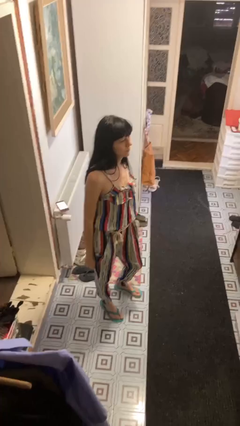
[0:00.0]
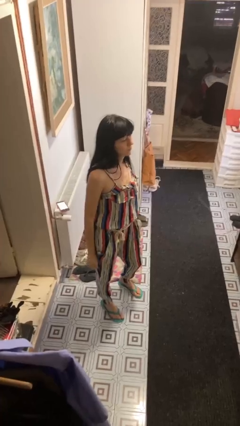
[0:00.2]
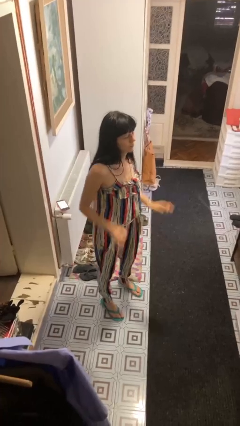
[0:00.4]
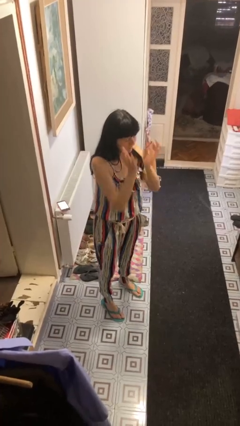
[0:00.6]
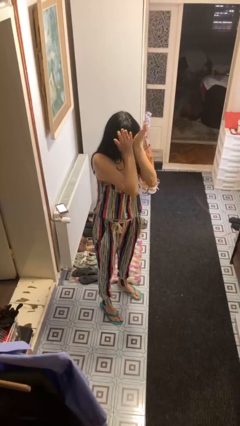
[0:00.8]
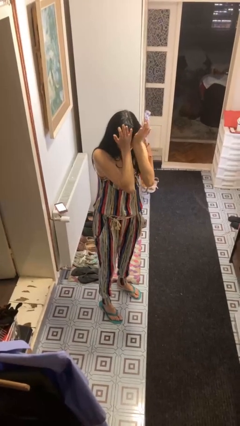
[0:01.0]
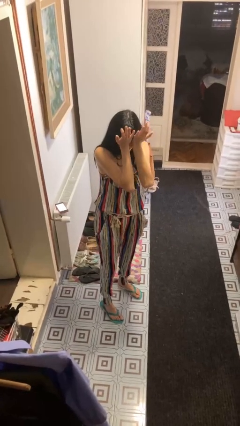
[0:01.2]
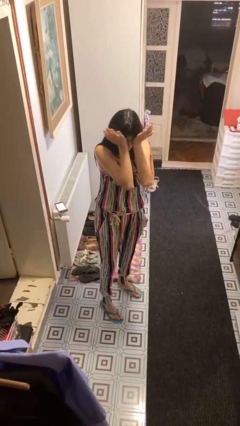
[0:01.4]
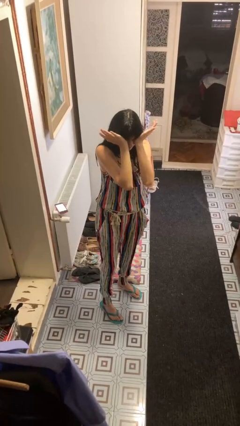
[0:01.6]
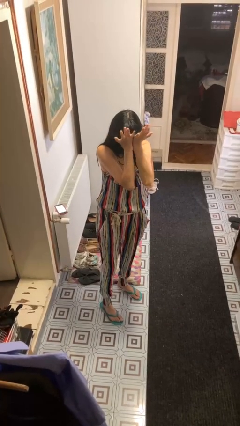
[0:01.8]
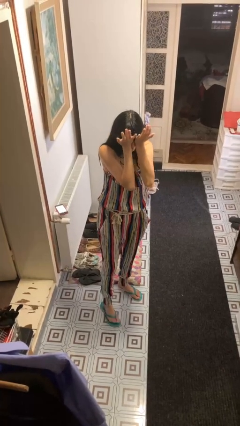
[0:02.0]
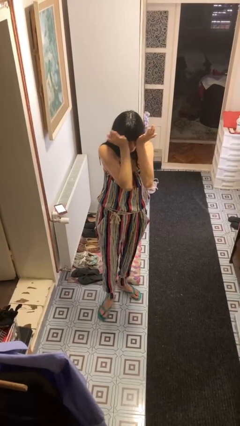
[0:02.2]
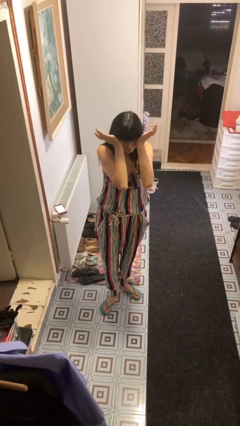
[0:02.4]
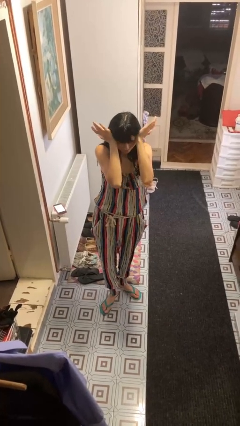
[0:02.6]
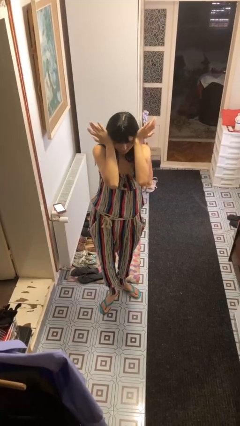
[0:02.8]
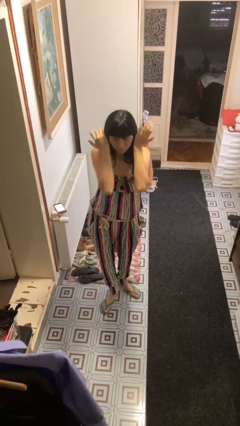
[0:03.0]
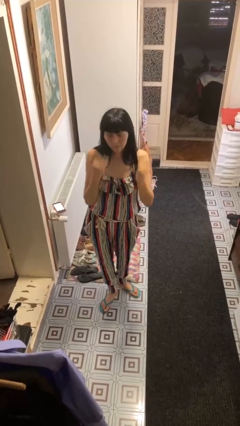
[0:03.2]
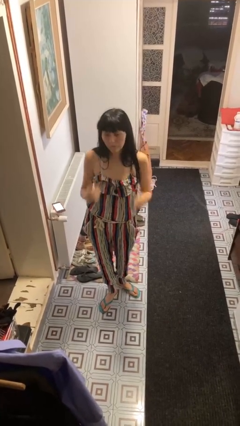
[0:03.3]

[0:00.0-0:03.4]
person rubs eyes

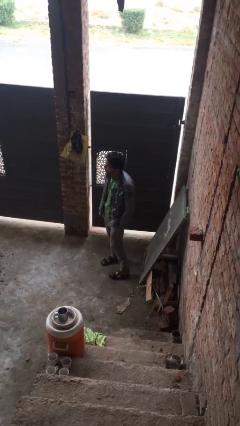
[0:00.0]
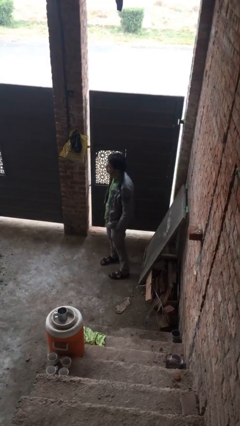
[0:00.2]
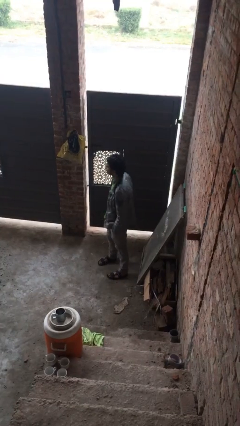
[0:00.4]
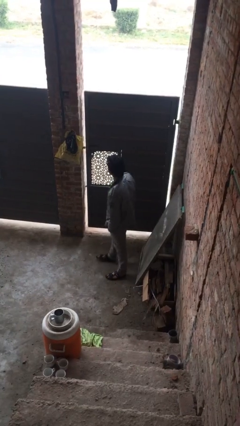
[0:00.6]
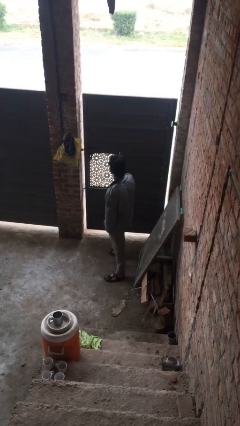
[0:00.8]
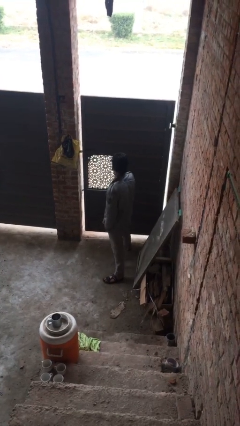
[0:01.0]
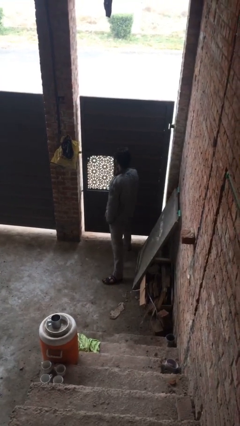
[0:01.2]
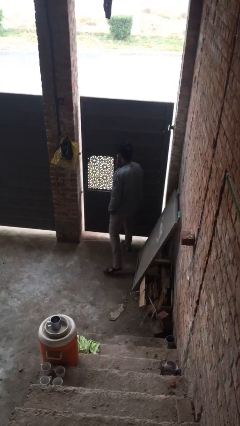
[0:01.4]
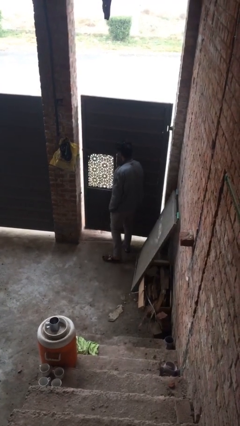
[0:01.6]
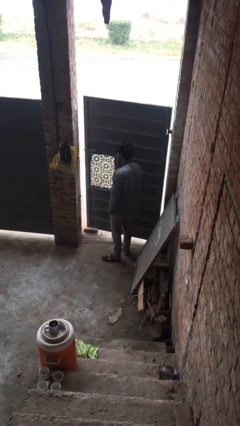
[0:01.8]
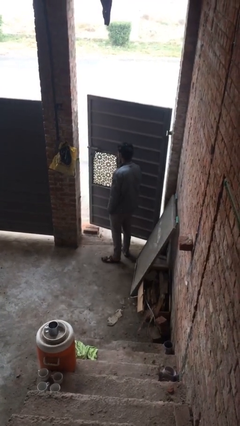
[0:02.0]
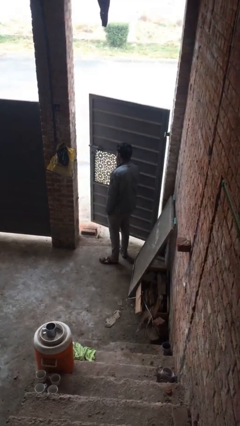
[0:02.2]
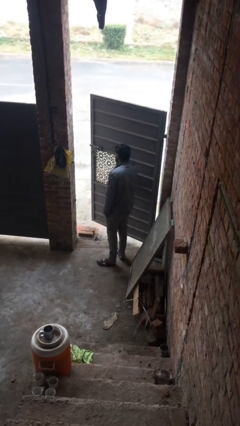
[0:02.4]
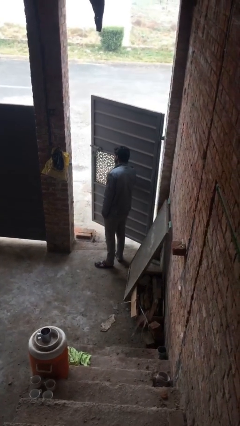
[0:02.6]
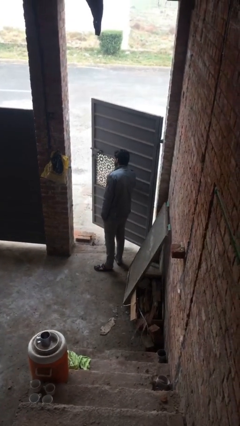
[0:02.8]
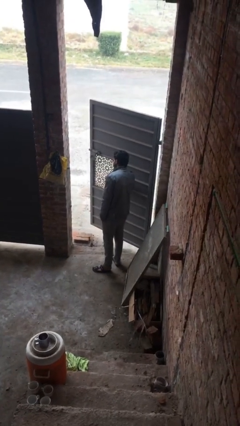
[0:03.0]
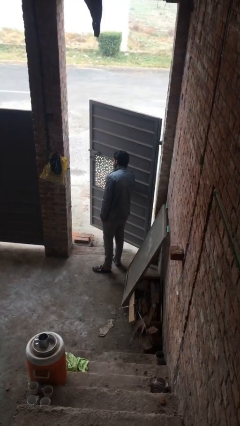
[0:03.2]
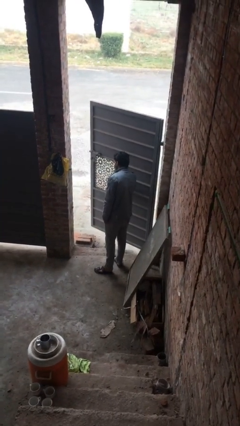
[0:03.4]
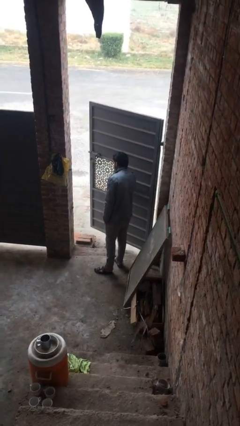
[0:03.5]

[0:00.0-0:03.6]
person opens facility door

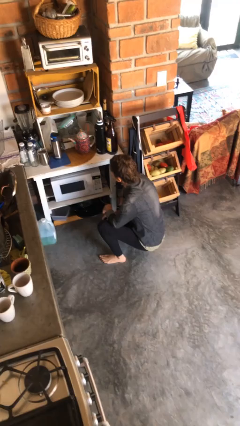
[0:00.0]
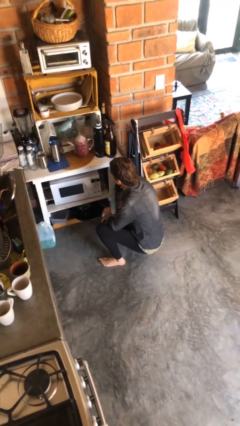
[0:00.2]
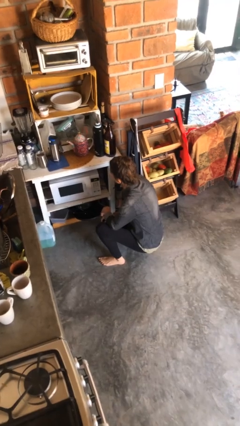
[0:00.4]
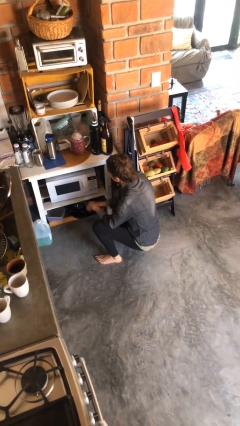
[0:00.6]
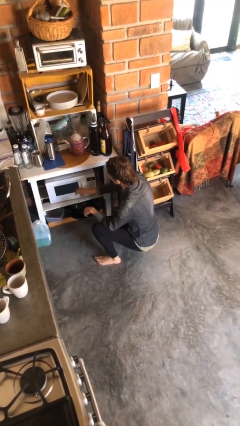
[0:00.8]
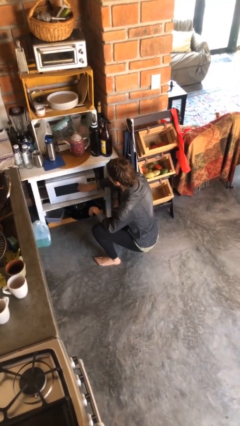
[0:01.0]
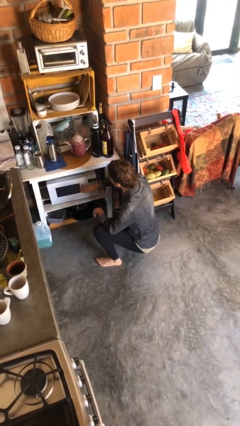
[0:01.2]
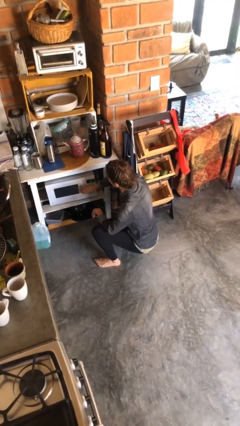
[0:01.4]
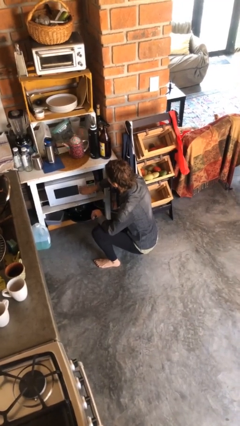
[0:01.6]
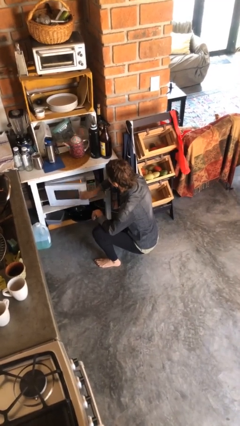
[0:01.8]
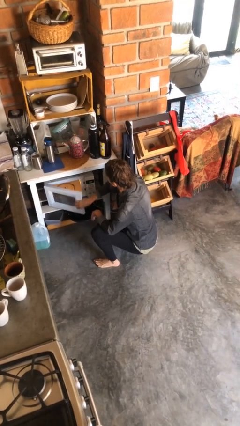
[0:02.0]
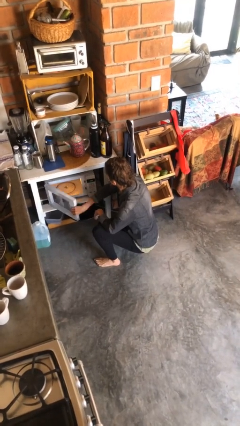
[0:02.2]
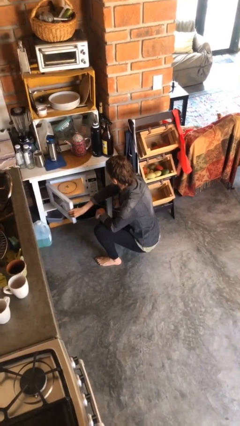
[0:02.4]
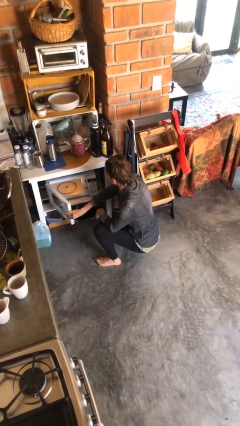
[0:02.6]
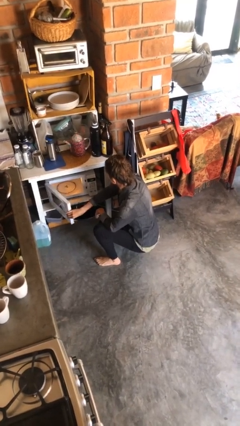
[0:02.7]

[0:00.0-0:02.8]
person opens microwave

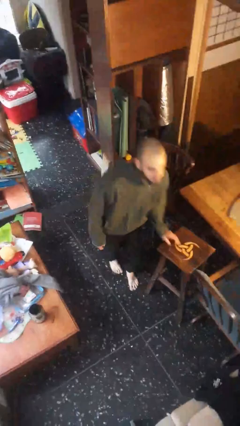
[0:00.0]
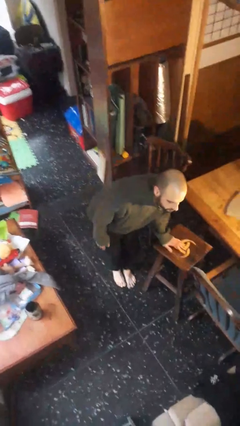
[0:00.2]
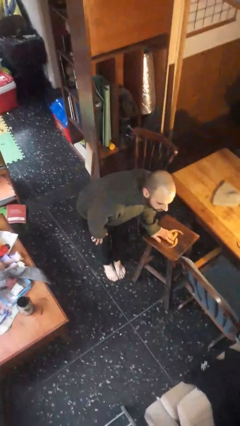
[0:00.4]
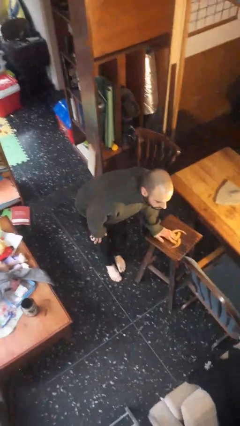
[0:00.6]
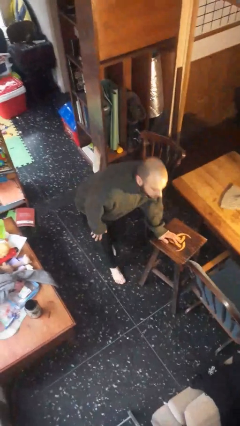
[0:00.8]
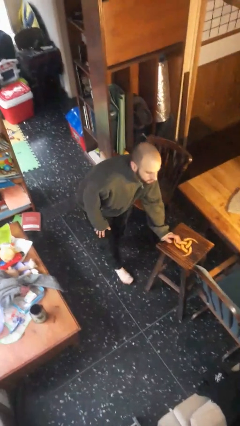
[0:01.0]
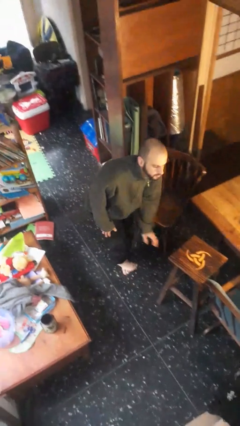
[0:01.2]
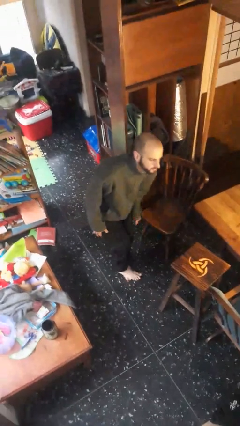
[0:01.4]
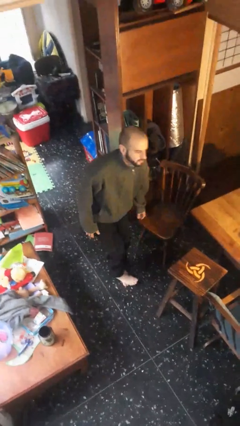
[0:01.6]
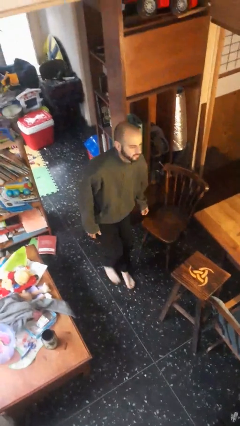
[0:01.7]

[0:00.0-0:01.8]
person stubs toe

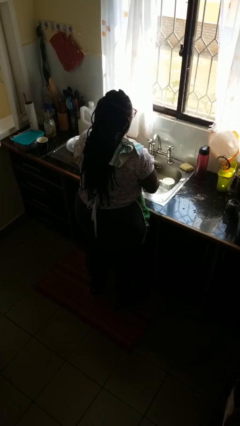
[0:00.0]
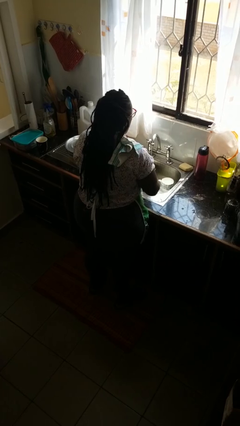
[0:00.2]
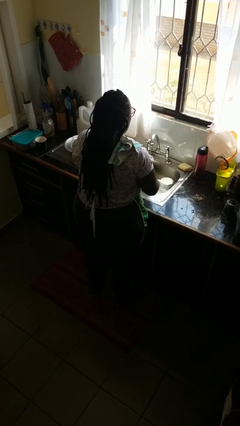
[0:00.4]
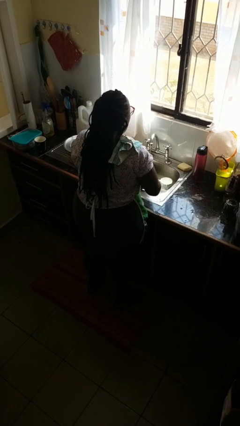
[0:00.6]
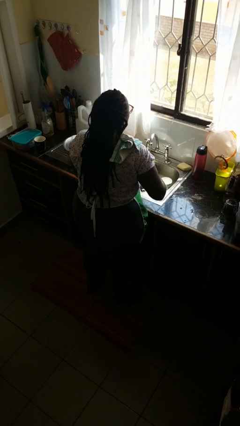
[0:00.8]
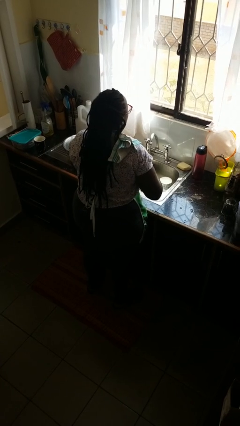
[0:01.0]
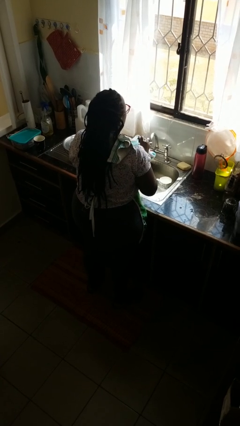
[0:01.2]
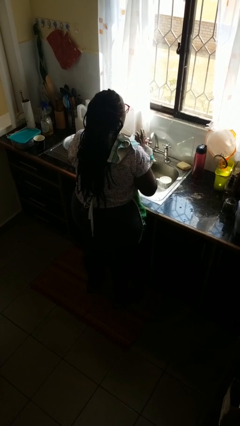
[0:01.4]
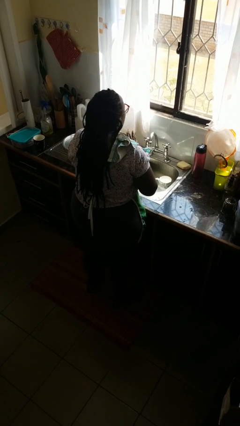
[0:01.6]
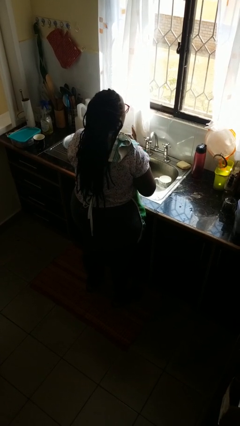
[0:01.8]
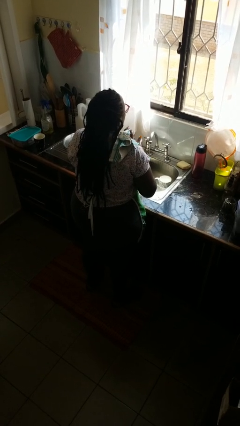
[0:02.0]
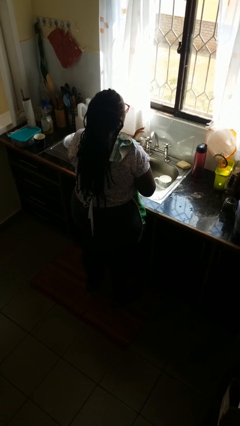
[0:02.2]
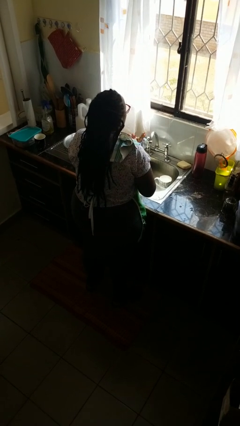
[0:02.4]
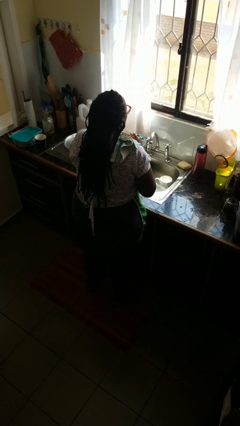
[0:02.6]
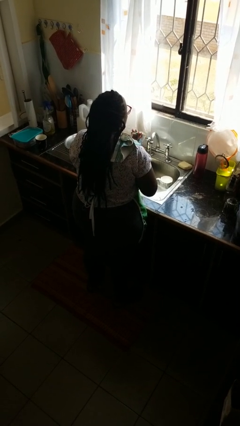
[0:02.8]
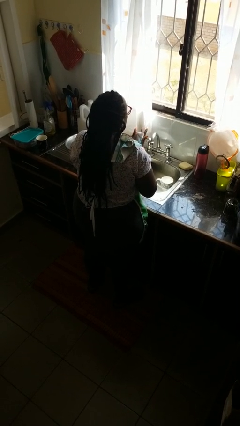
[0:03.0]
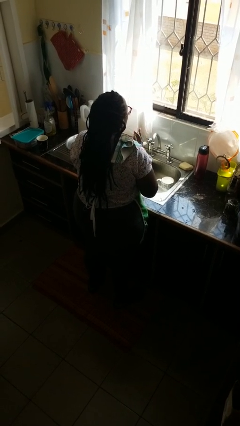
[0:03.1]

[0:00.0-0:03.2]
person dries hands with towel

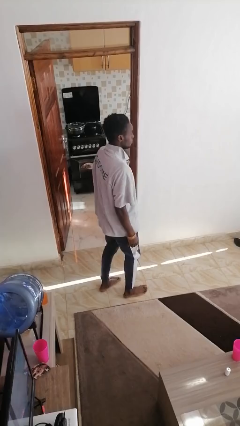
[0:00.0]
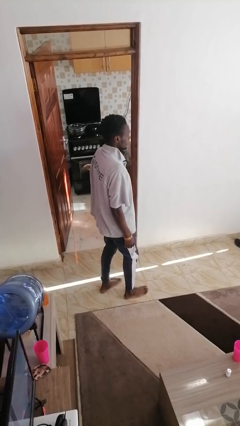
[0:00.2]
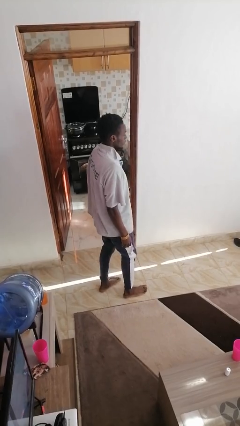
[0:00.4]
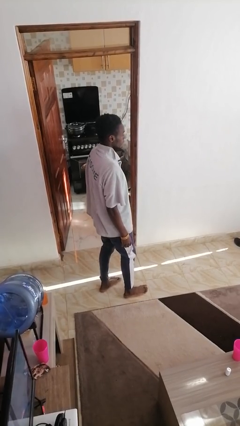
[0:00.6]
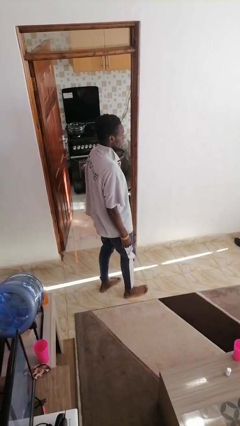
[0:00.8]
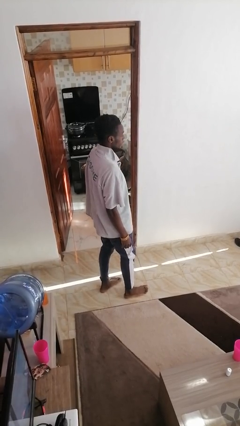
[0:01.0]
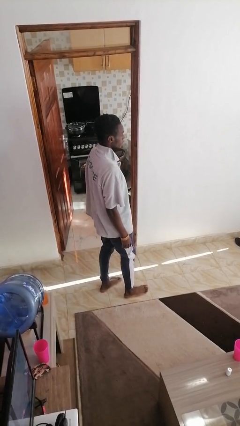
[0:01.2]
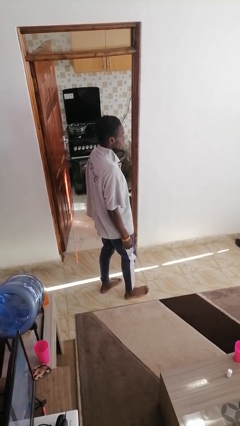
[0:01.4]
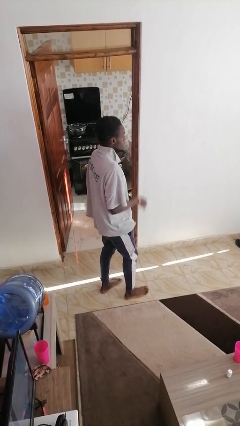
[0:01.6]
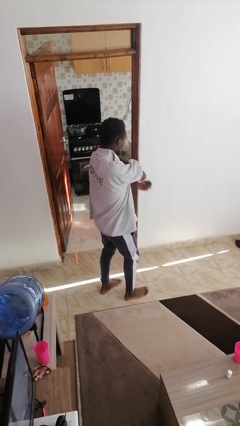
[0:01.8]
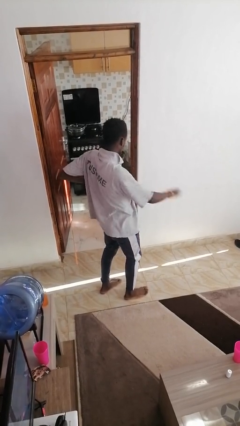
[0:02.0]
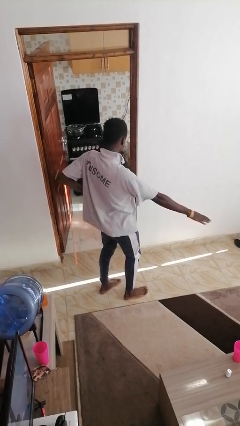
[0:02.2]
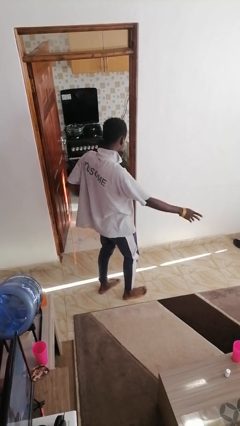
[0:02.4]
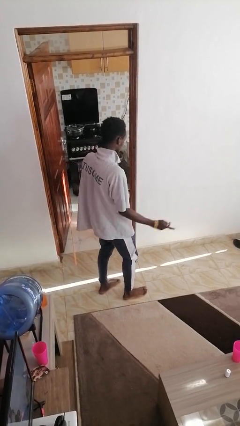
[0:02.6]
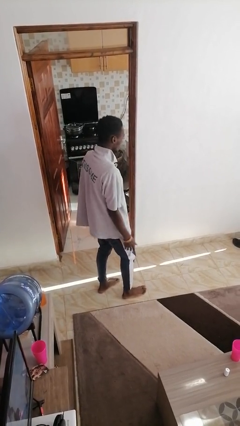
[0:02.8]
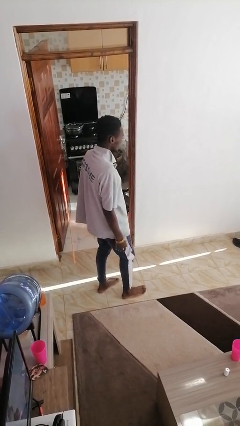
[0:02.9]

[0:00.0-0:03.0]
person karate chop
